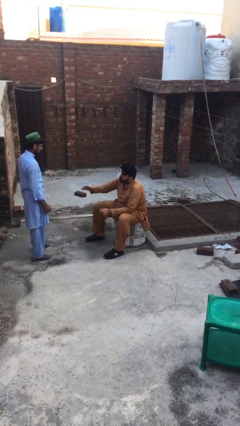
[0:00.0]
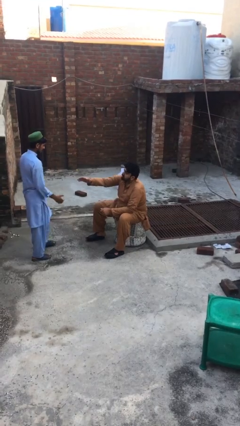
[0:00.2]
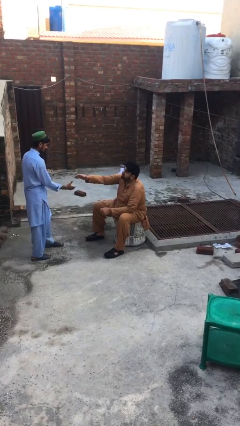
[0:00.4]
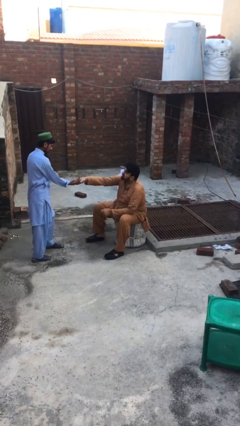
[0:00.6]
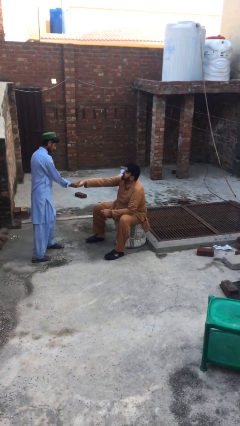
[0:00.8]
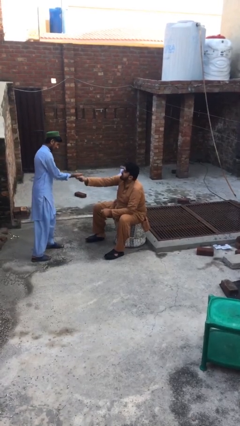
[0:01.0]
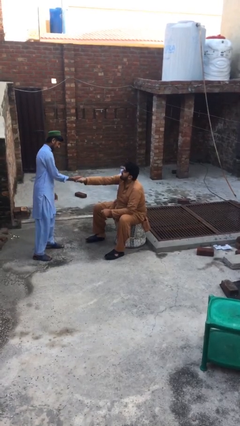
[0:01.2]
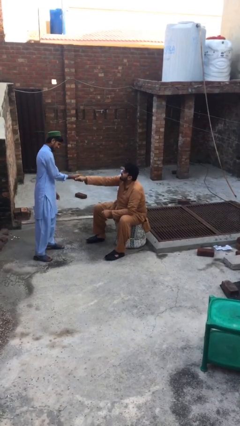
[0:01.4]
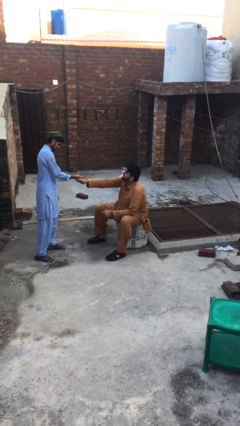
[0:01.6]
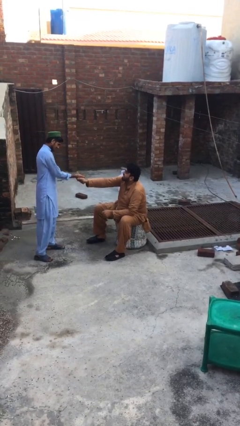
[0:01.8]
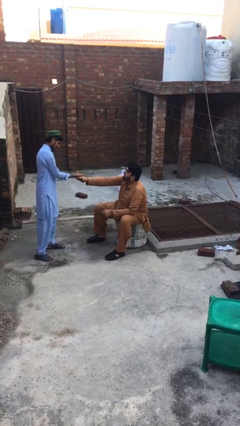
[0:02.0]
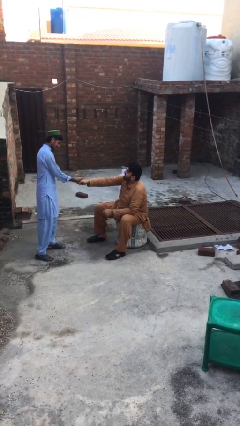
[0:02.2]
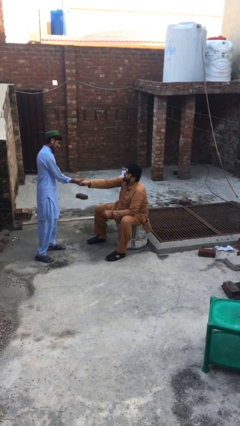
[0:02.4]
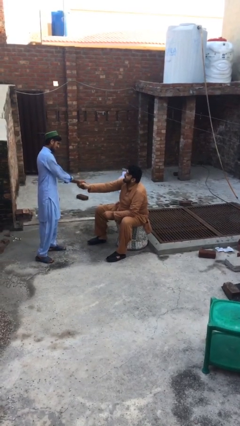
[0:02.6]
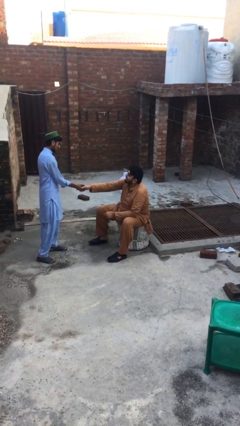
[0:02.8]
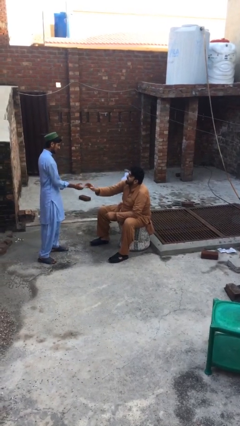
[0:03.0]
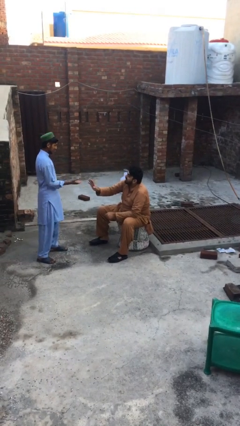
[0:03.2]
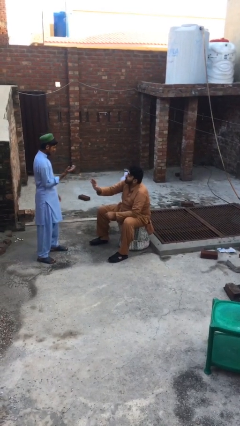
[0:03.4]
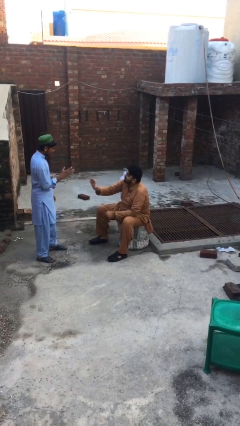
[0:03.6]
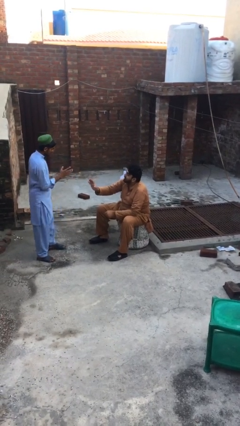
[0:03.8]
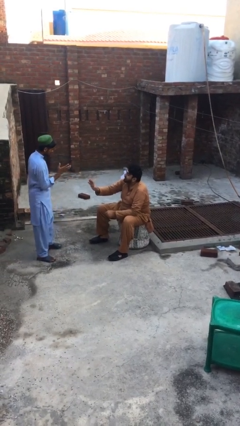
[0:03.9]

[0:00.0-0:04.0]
person shakes hand

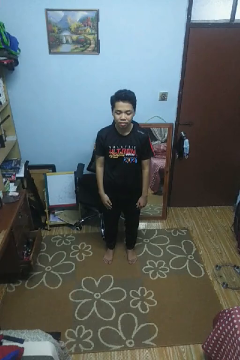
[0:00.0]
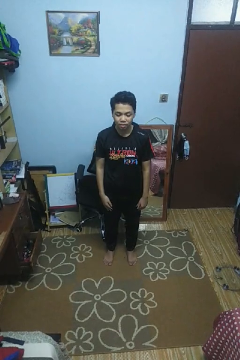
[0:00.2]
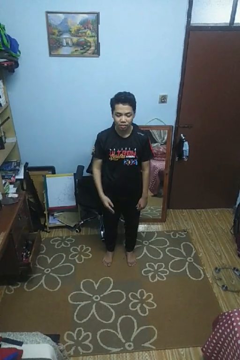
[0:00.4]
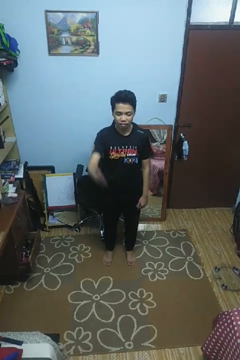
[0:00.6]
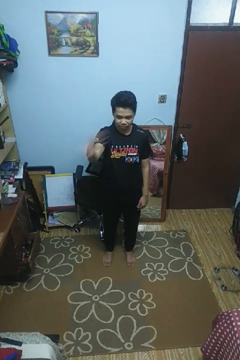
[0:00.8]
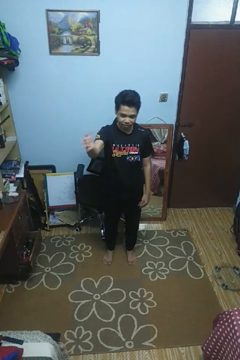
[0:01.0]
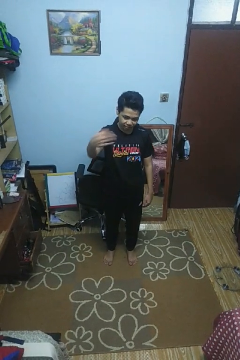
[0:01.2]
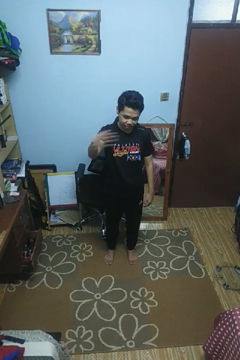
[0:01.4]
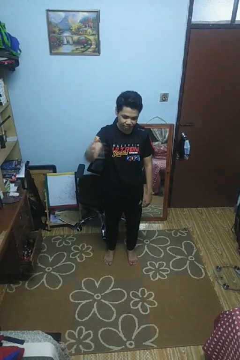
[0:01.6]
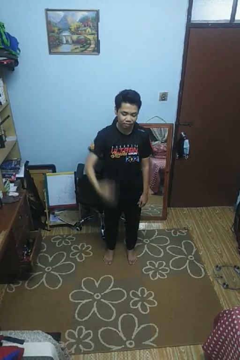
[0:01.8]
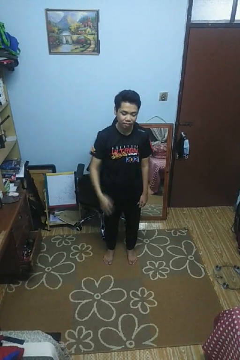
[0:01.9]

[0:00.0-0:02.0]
person gestures come here

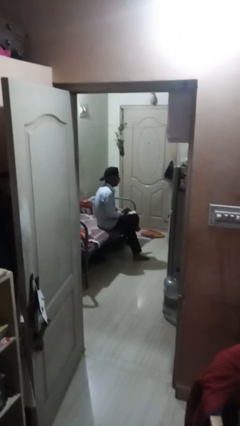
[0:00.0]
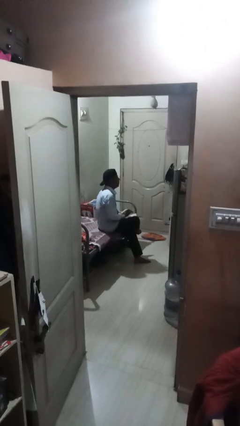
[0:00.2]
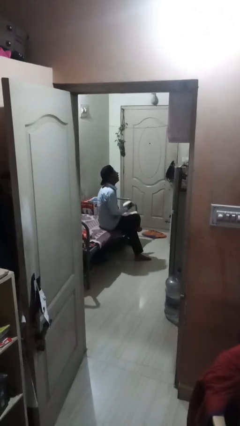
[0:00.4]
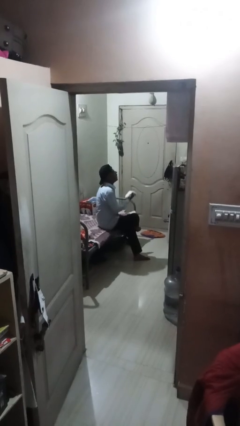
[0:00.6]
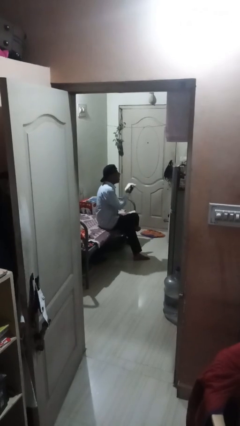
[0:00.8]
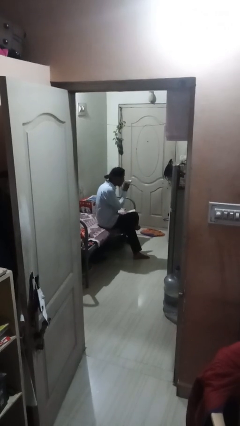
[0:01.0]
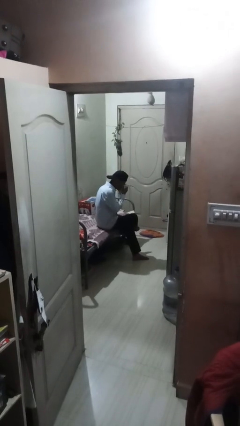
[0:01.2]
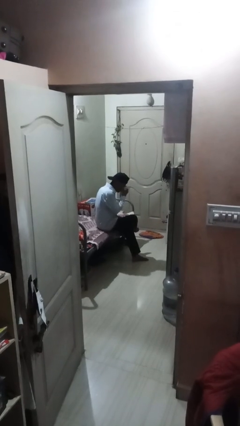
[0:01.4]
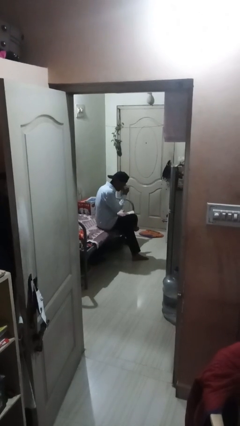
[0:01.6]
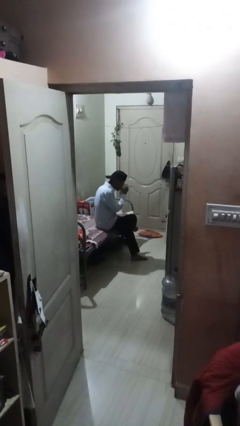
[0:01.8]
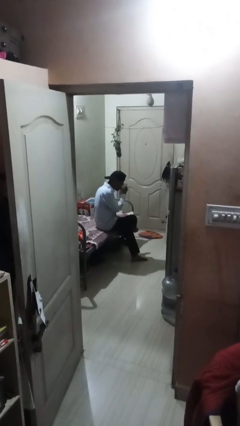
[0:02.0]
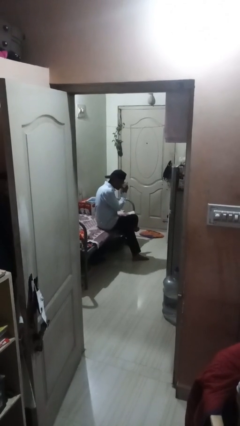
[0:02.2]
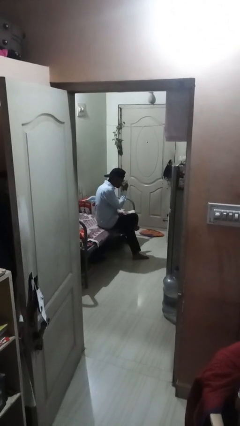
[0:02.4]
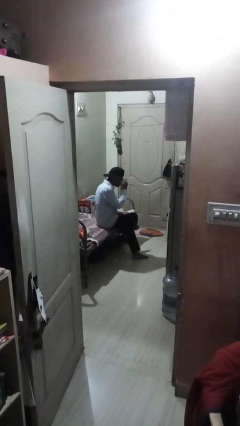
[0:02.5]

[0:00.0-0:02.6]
person blows nose

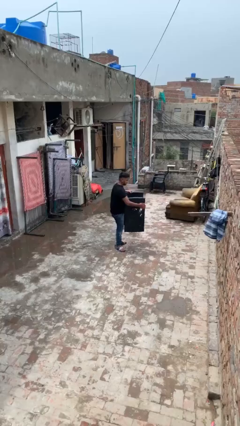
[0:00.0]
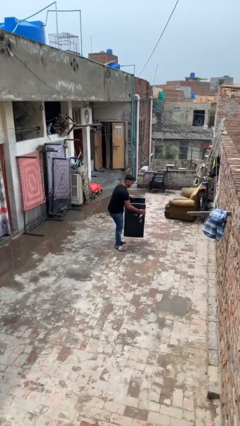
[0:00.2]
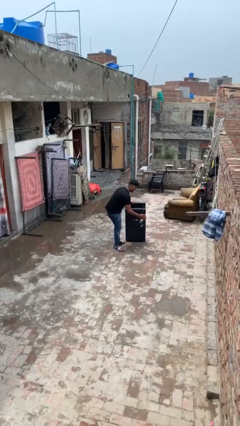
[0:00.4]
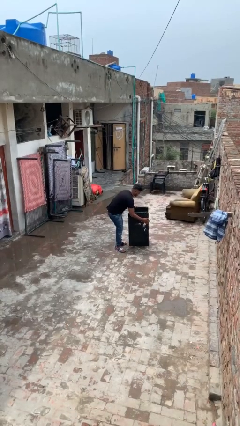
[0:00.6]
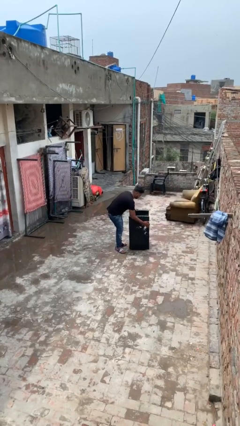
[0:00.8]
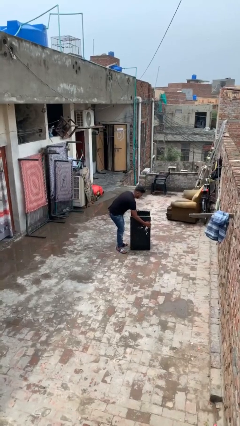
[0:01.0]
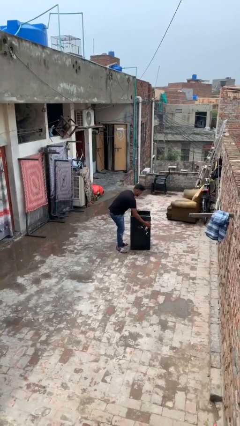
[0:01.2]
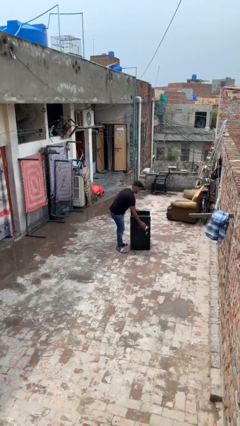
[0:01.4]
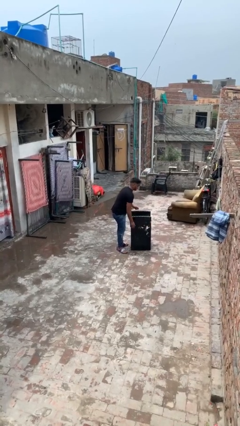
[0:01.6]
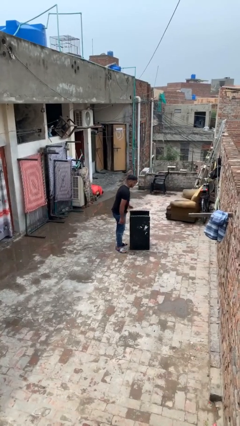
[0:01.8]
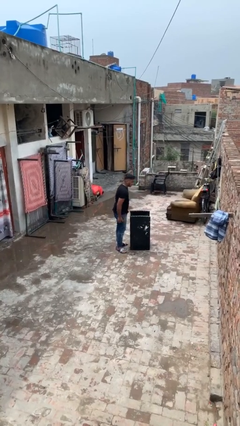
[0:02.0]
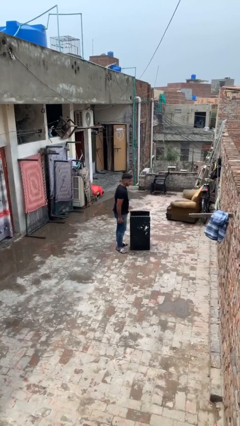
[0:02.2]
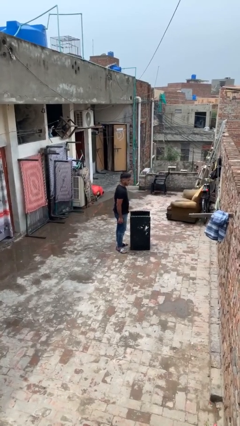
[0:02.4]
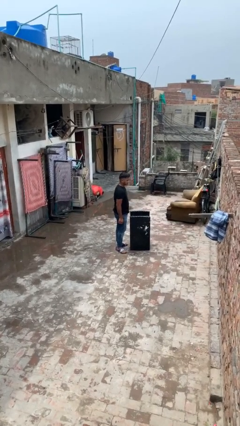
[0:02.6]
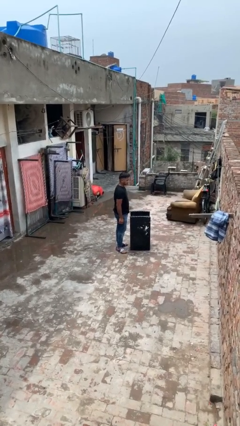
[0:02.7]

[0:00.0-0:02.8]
person puts down object on floor

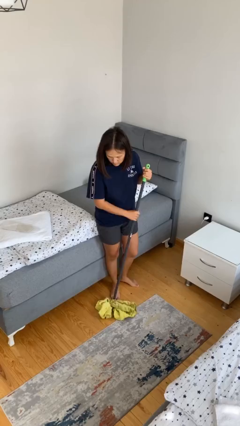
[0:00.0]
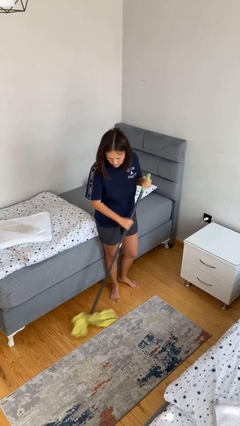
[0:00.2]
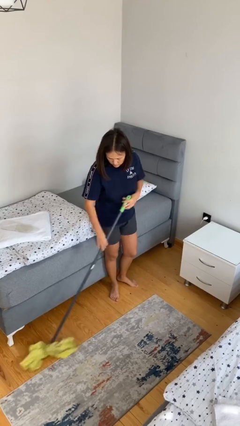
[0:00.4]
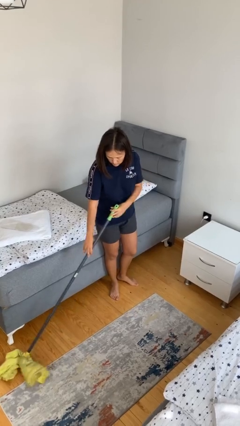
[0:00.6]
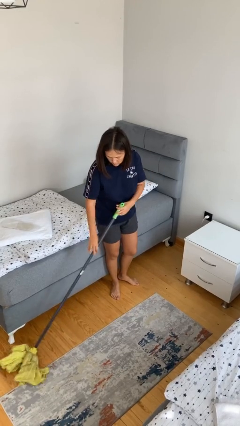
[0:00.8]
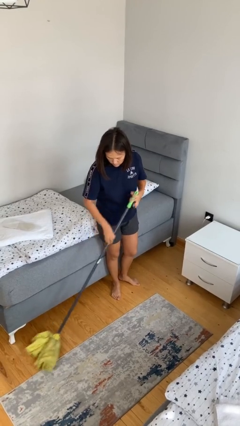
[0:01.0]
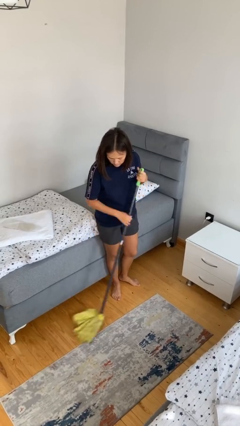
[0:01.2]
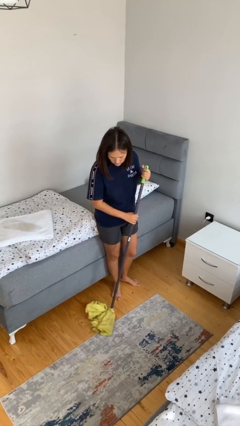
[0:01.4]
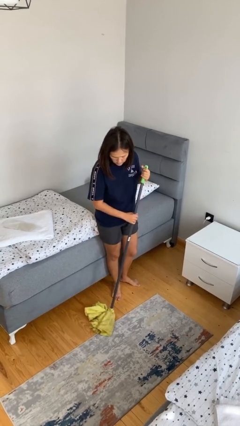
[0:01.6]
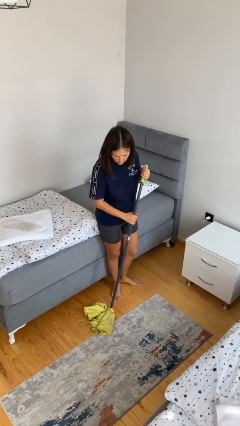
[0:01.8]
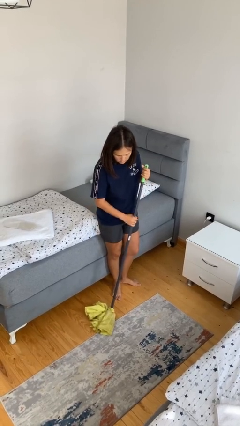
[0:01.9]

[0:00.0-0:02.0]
person sweeps floor

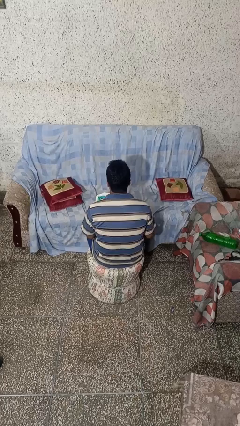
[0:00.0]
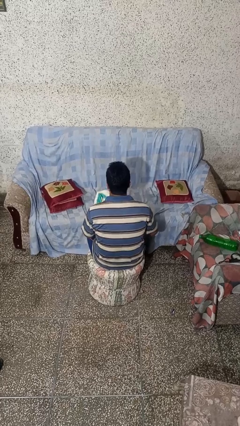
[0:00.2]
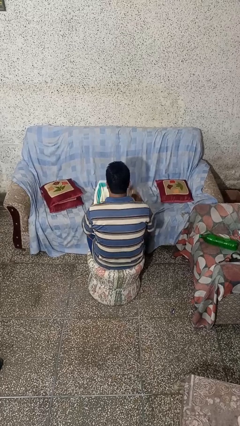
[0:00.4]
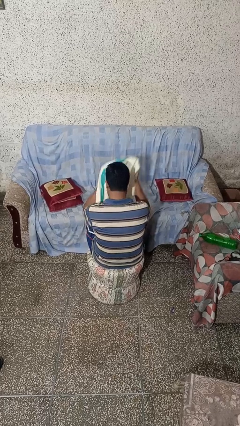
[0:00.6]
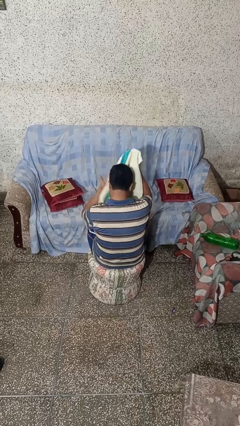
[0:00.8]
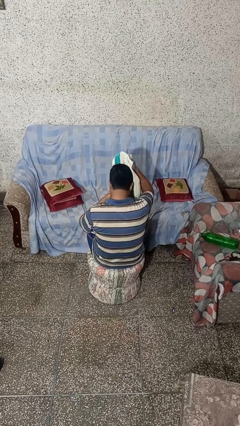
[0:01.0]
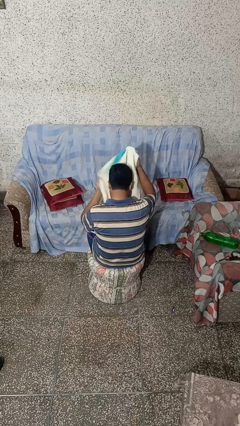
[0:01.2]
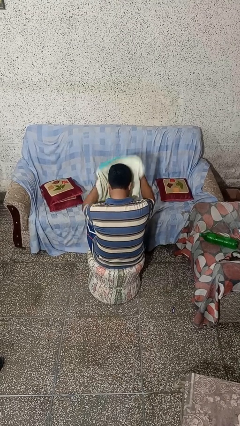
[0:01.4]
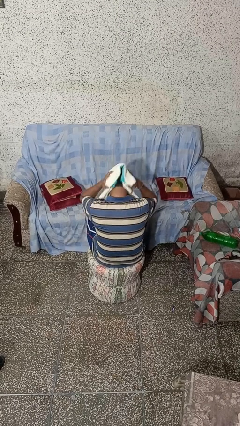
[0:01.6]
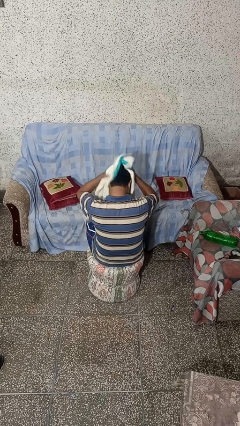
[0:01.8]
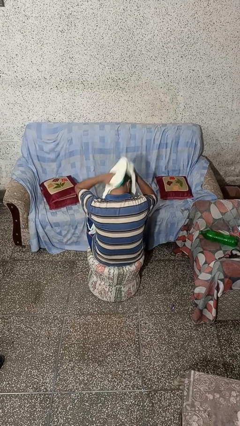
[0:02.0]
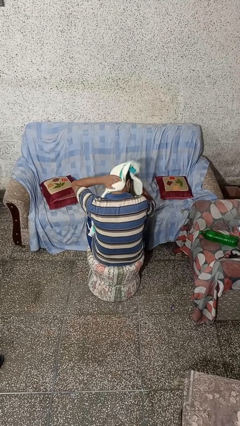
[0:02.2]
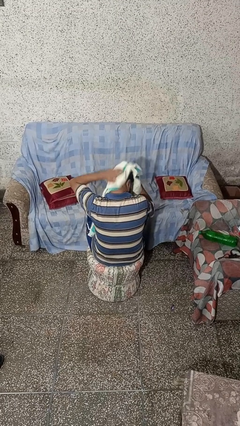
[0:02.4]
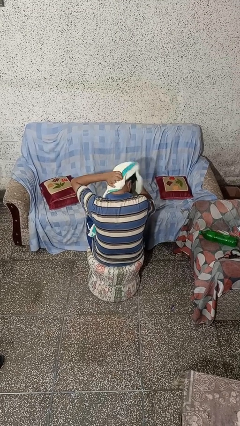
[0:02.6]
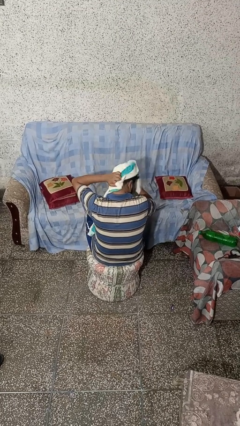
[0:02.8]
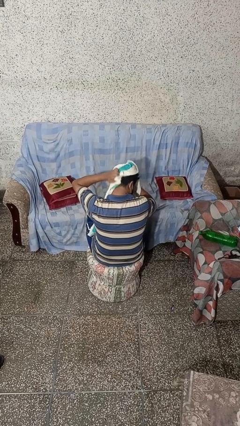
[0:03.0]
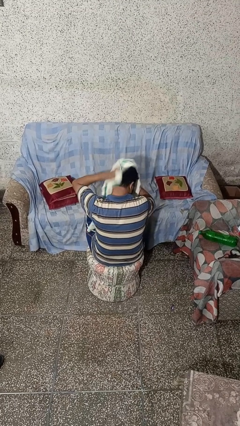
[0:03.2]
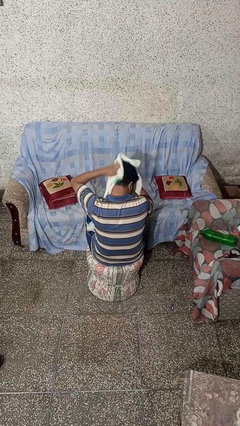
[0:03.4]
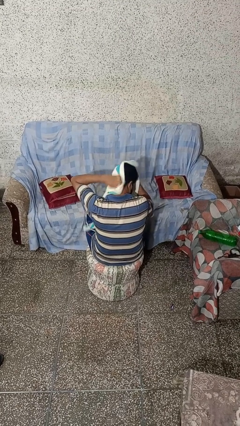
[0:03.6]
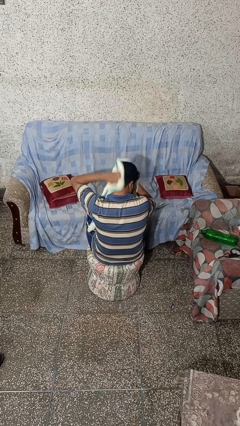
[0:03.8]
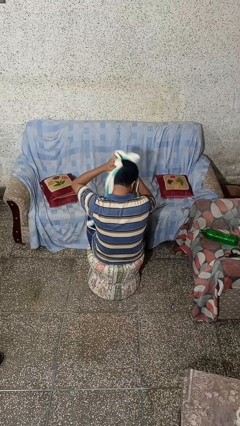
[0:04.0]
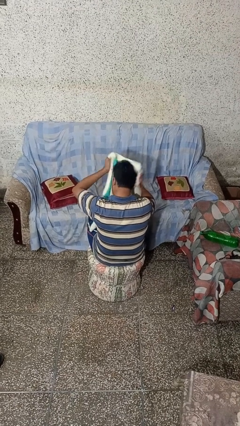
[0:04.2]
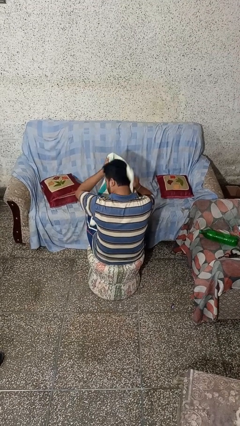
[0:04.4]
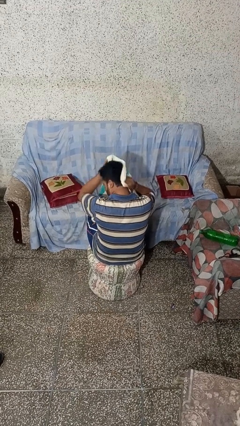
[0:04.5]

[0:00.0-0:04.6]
person dries hair with towel
